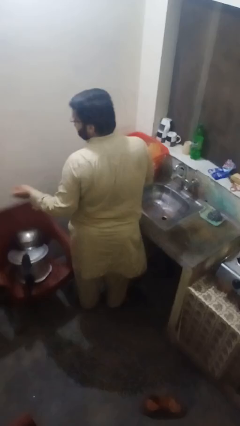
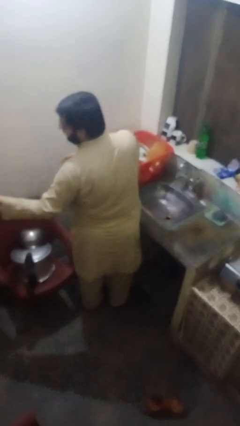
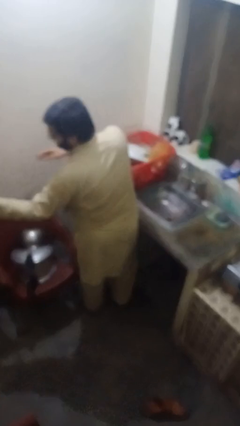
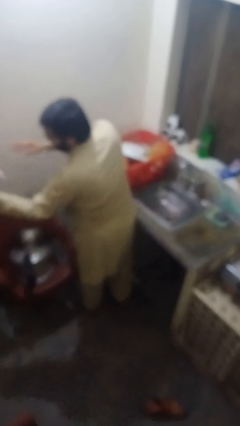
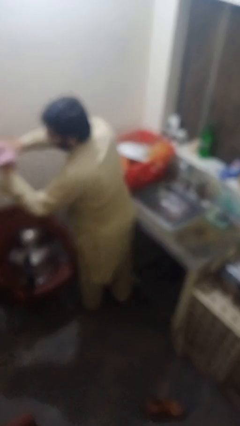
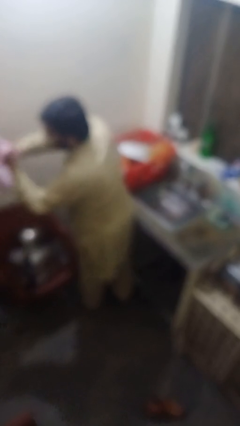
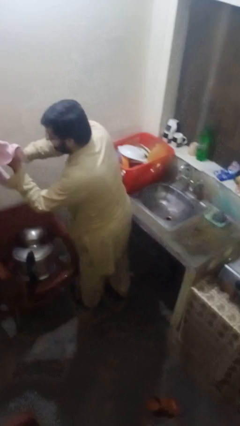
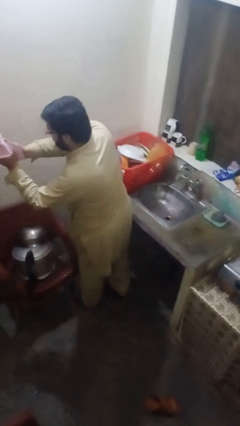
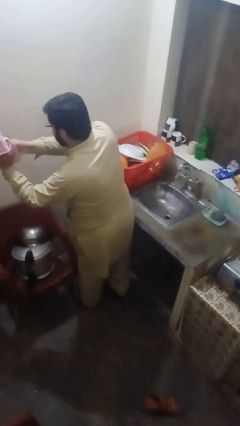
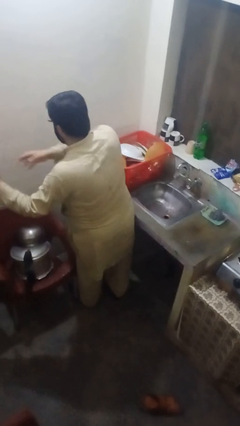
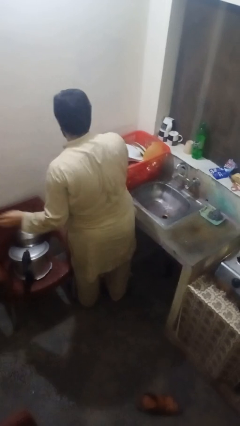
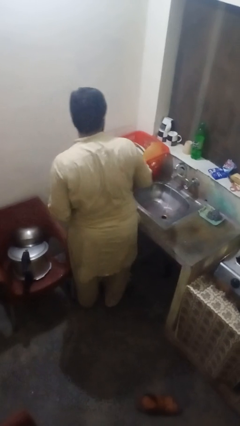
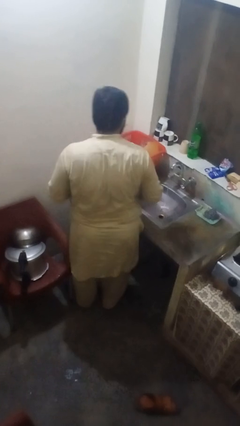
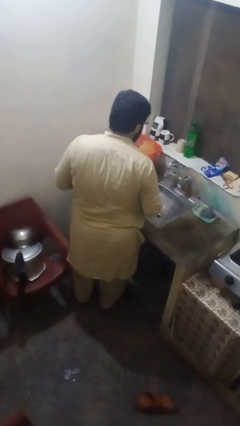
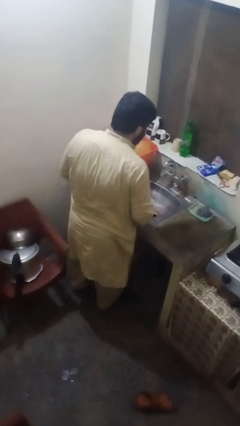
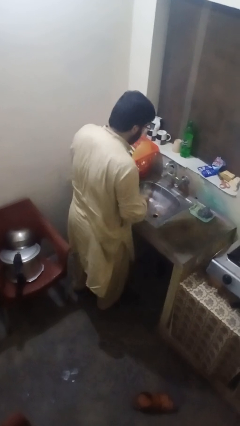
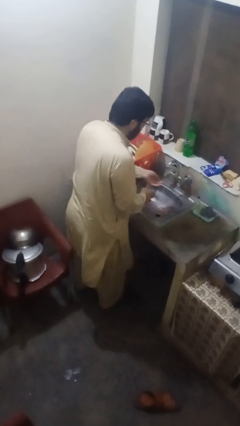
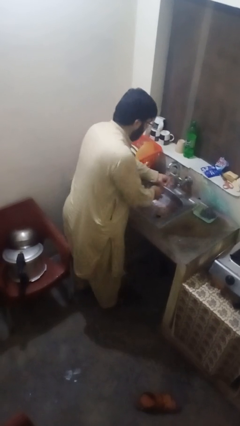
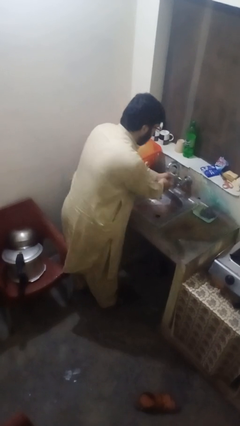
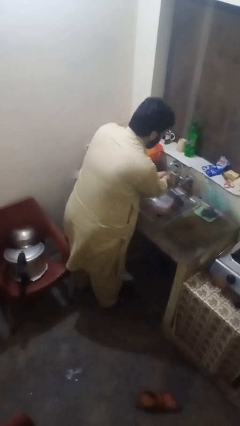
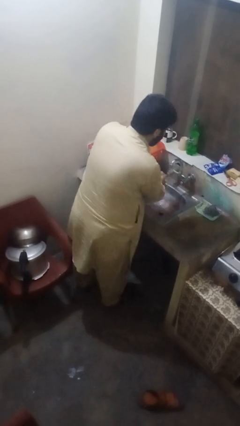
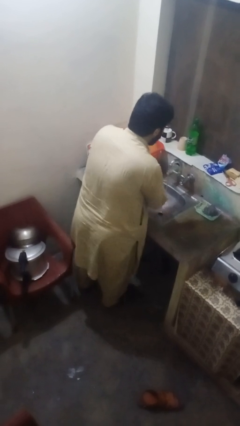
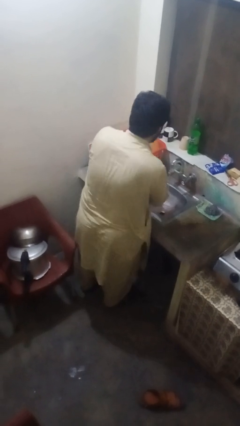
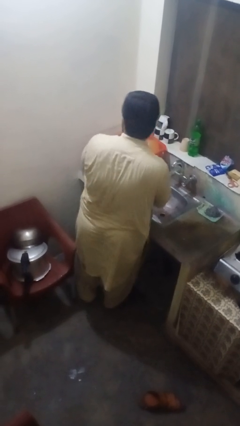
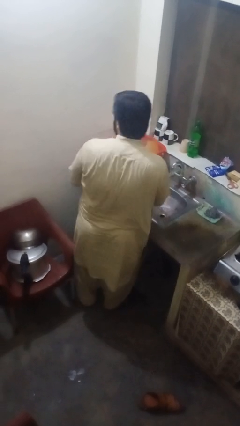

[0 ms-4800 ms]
person washes hands

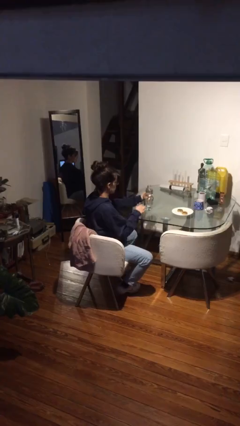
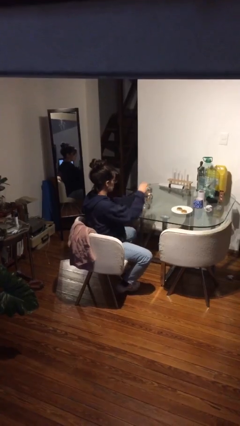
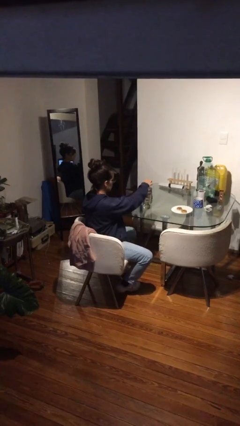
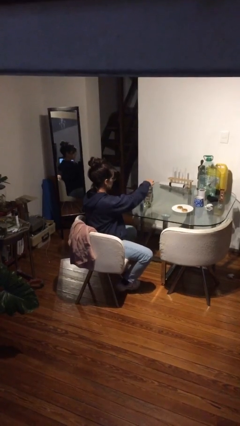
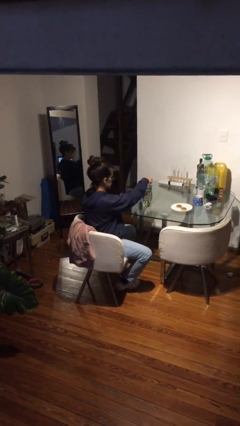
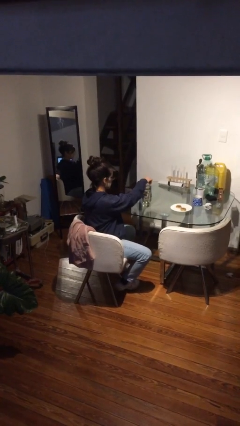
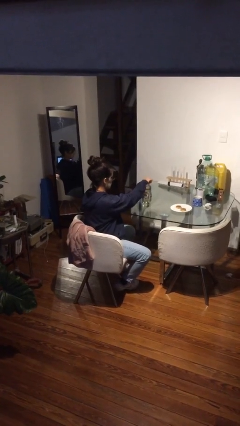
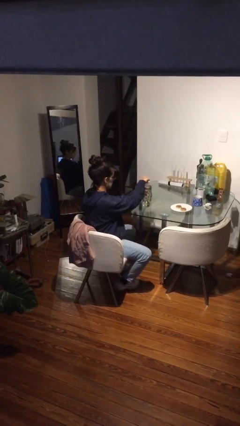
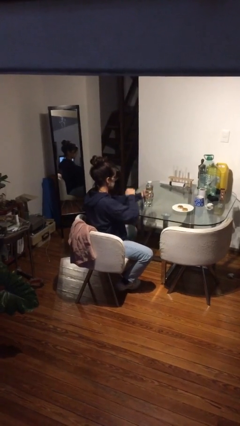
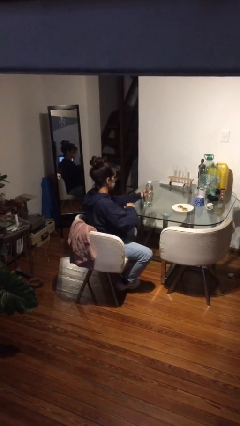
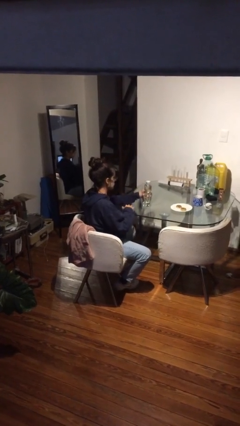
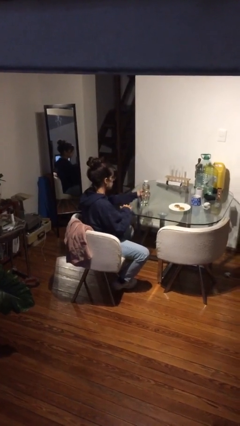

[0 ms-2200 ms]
person screws lid to bottle

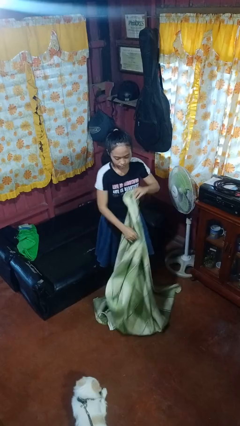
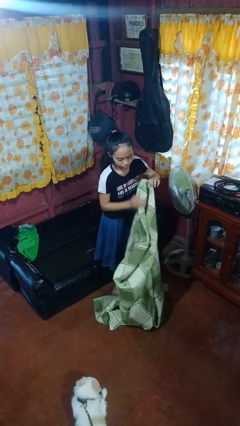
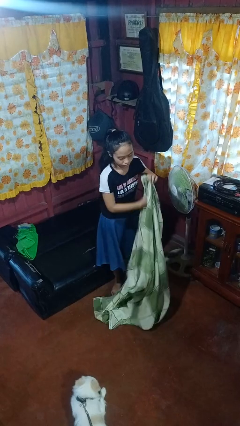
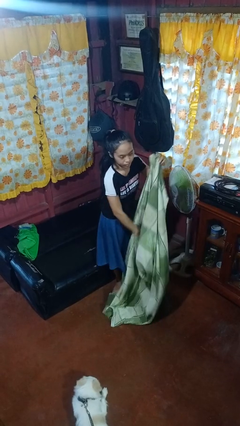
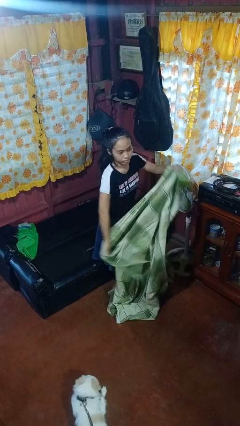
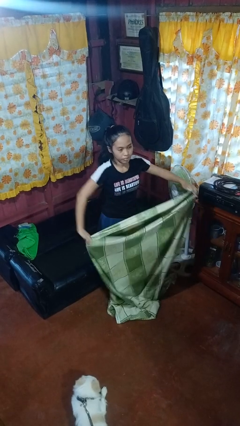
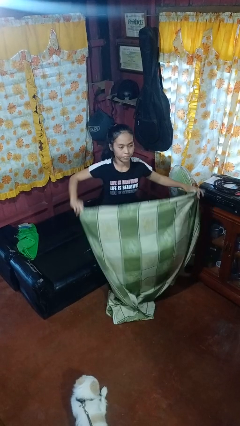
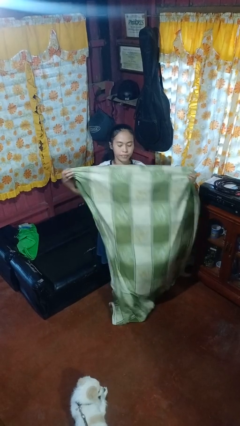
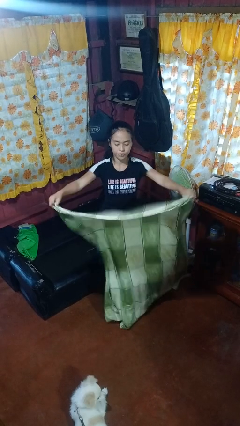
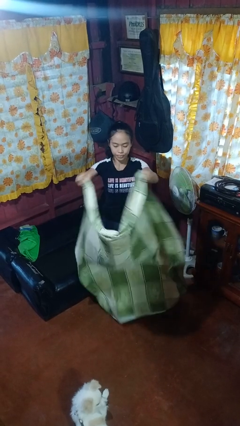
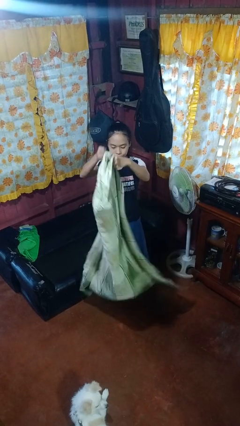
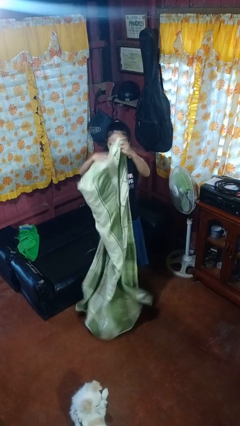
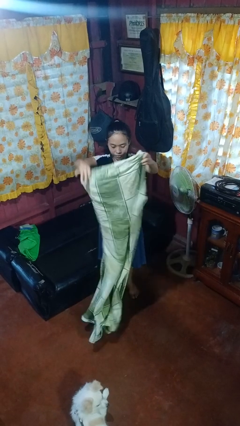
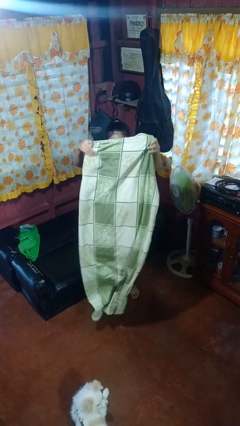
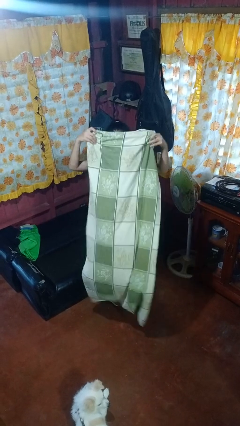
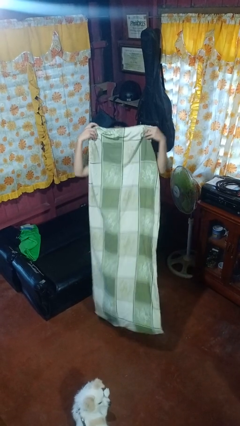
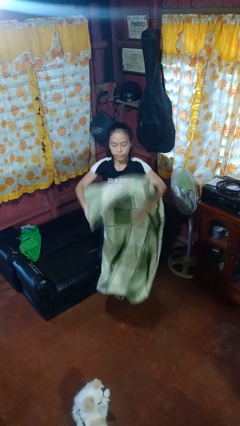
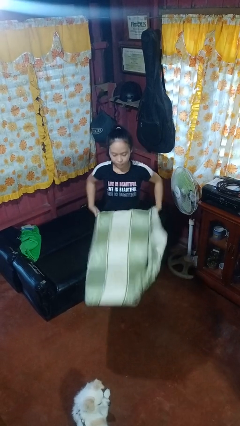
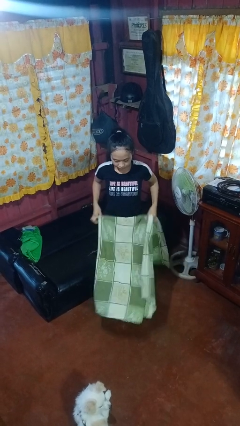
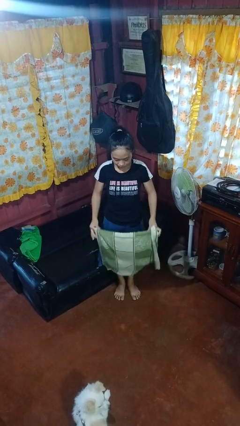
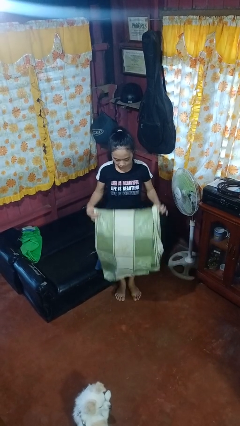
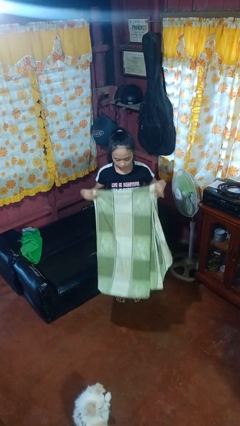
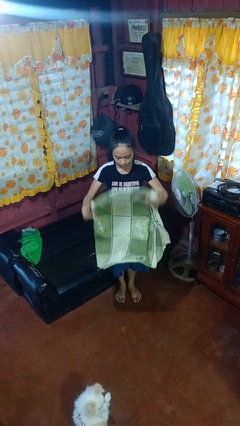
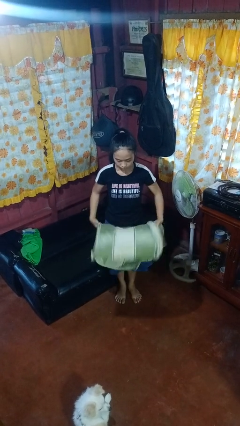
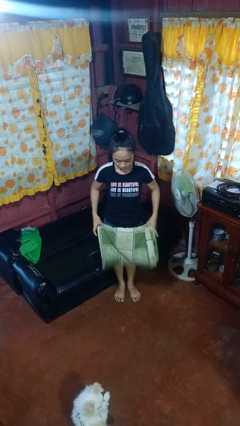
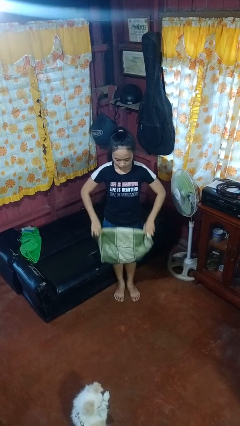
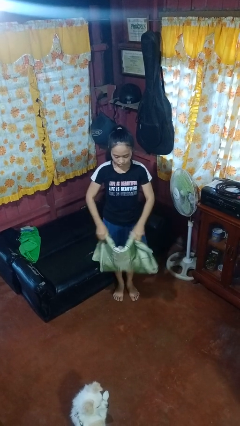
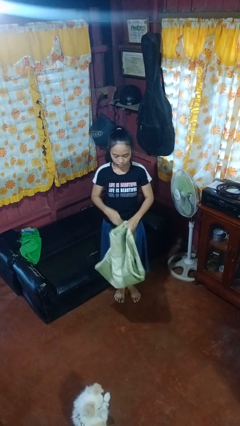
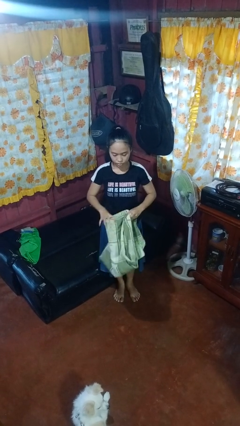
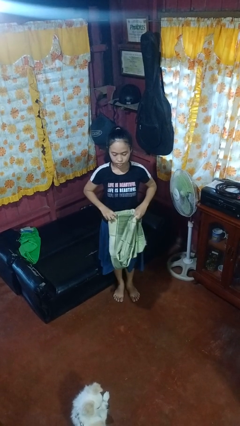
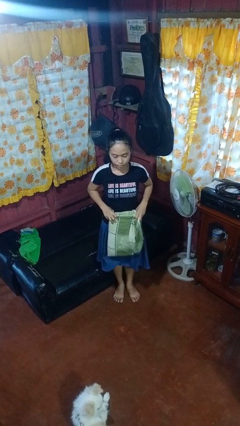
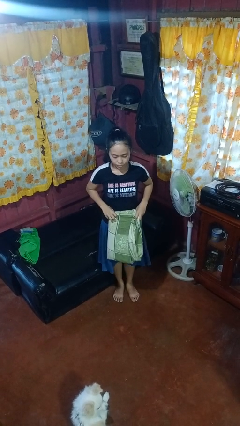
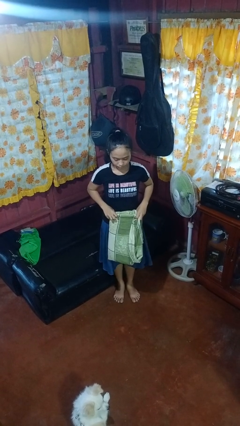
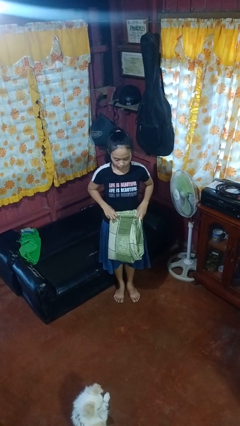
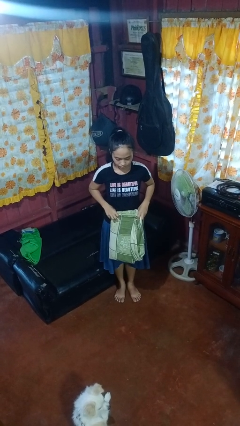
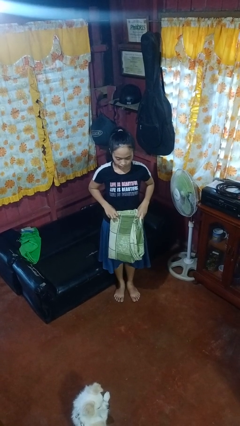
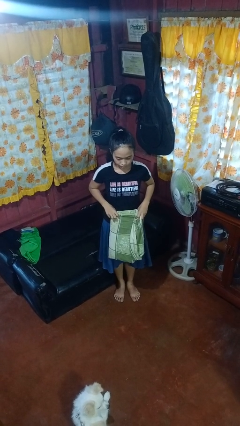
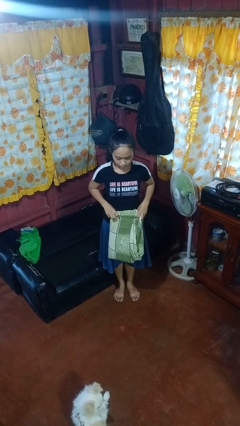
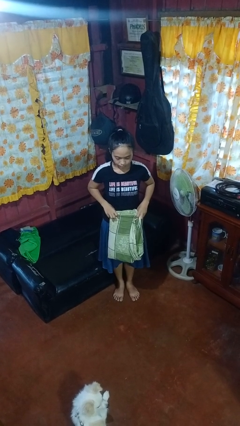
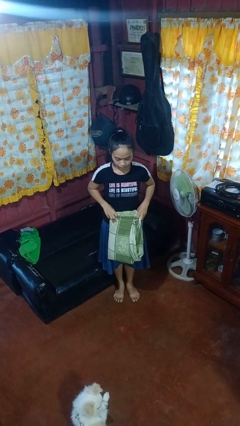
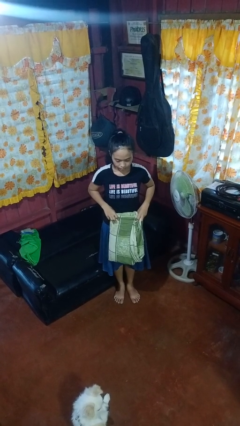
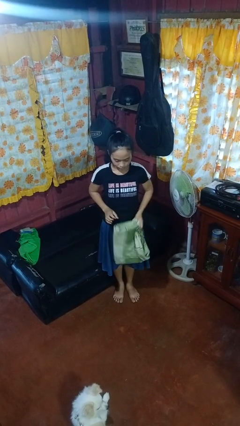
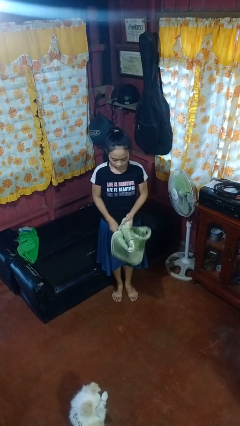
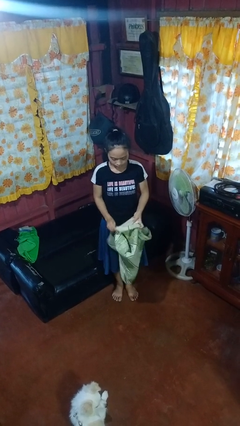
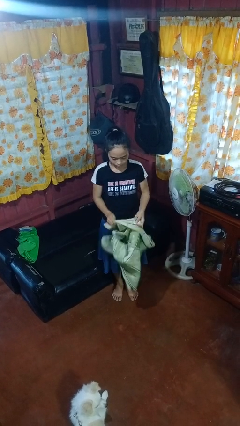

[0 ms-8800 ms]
person folds blanket

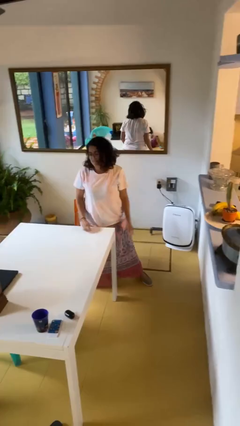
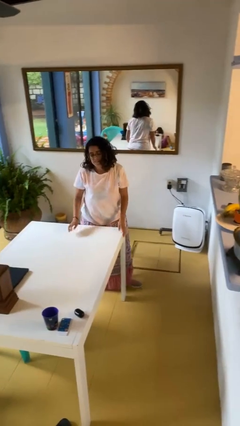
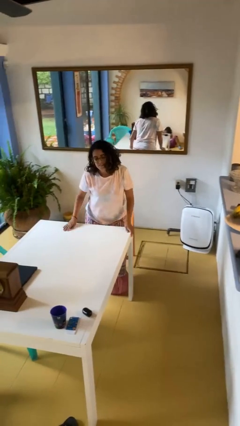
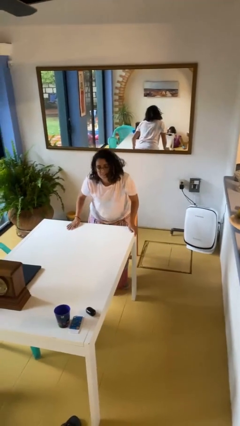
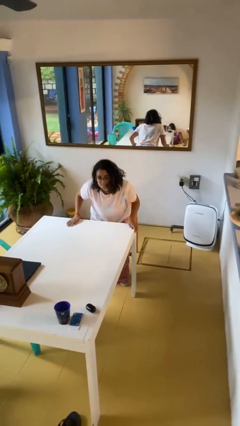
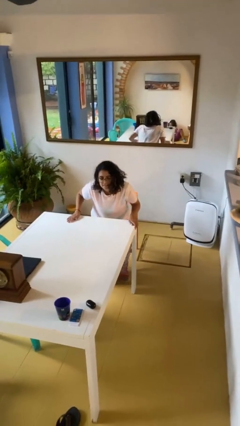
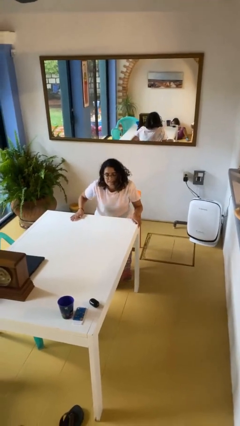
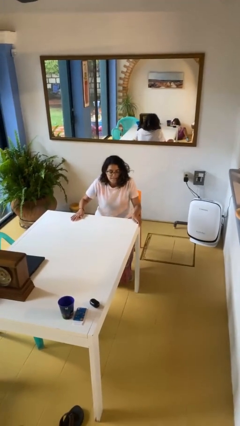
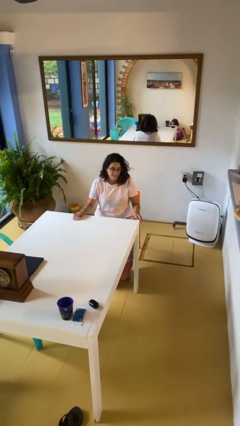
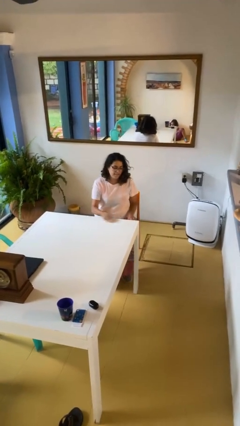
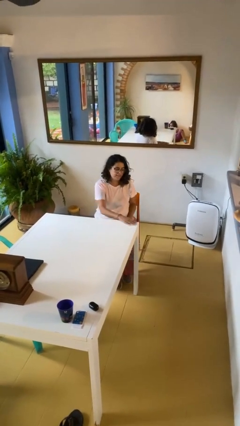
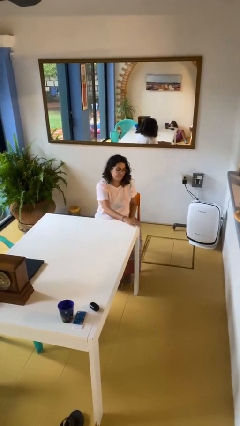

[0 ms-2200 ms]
person sits down
